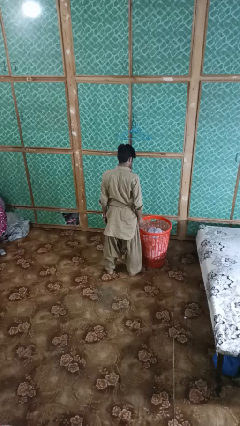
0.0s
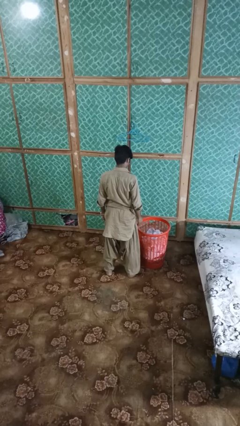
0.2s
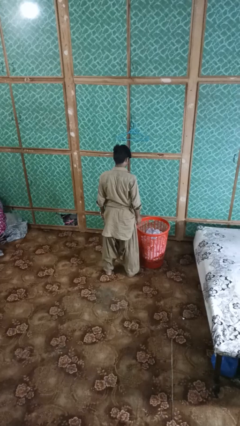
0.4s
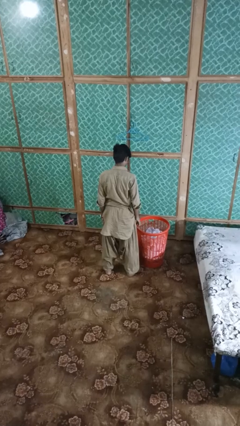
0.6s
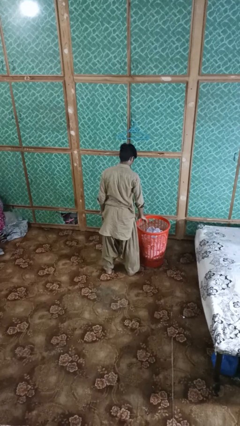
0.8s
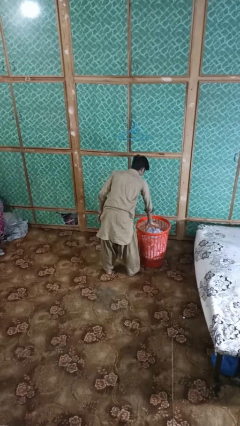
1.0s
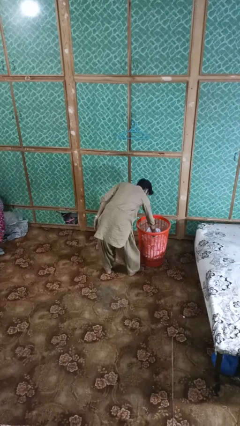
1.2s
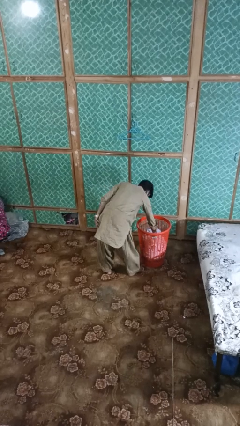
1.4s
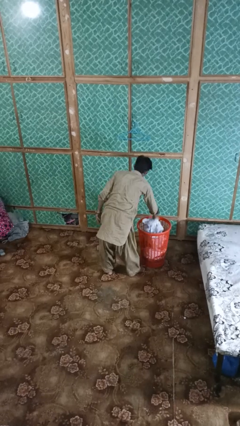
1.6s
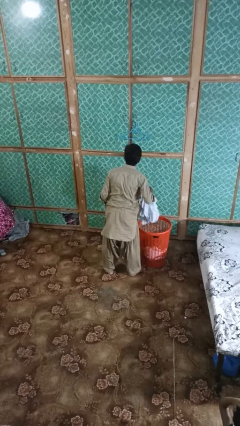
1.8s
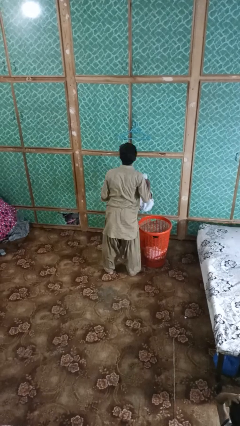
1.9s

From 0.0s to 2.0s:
person takes object from basket

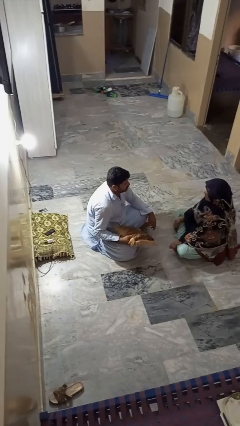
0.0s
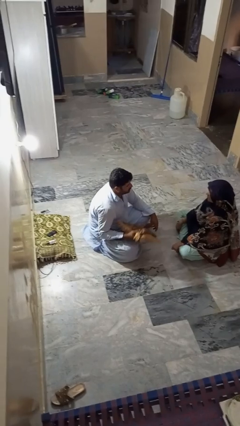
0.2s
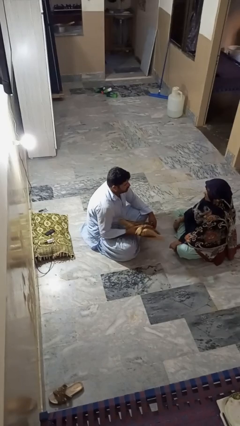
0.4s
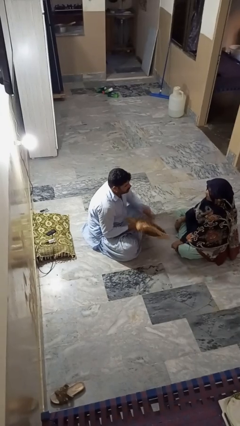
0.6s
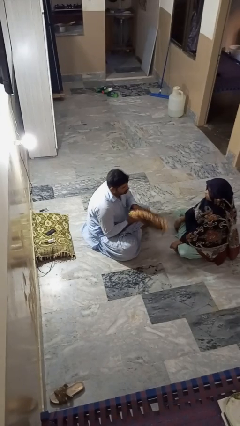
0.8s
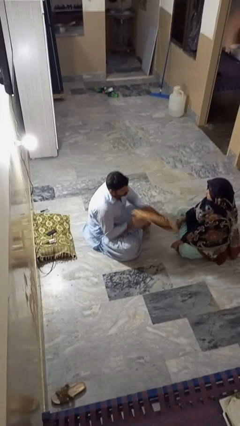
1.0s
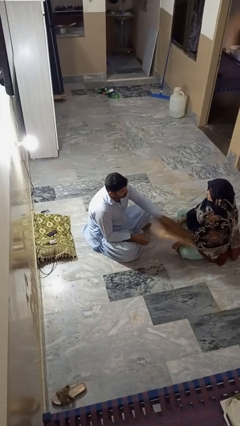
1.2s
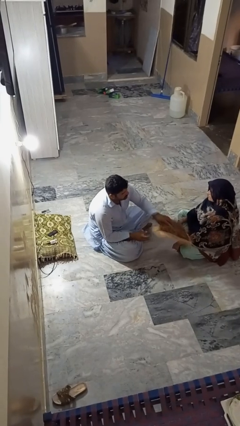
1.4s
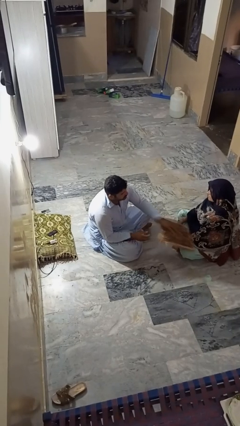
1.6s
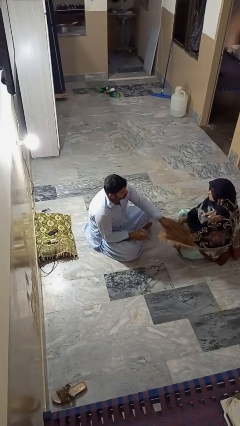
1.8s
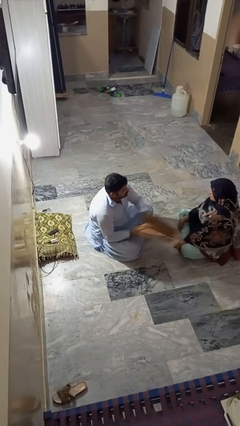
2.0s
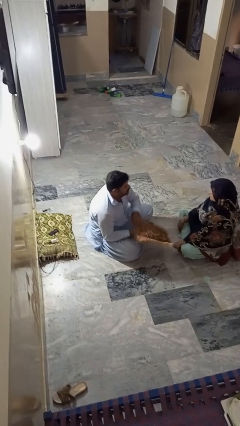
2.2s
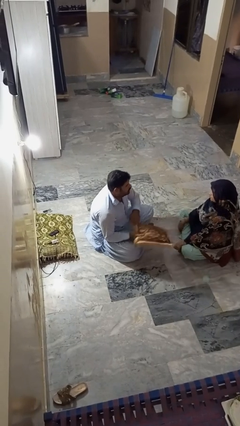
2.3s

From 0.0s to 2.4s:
person hits person with pillow

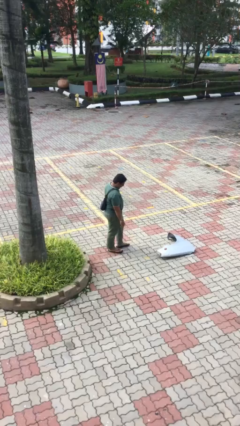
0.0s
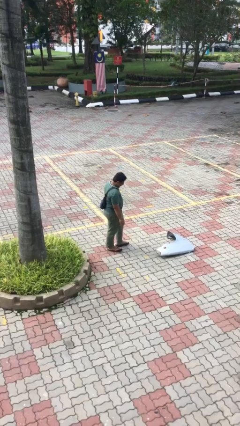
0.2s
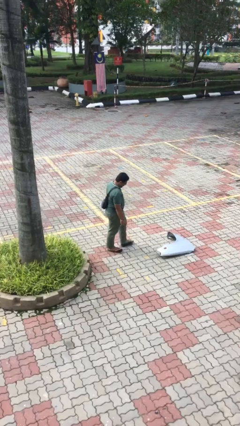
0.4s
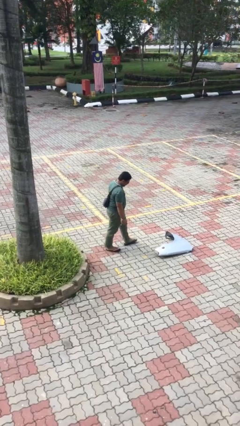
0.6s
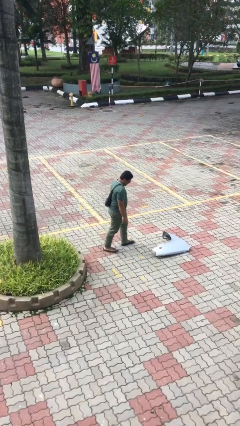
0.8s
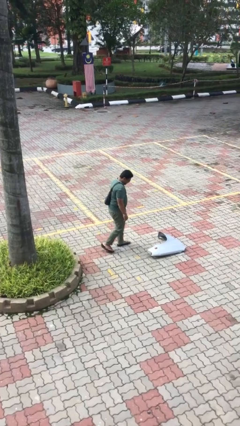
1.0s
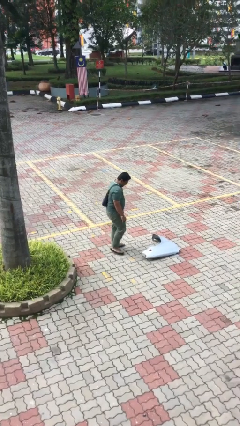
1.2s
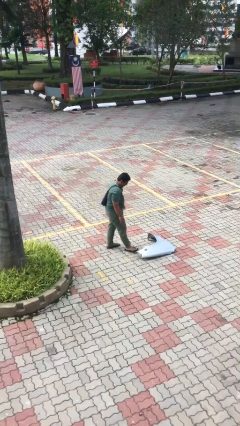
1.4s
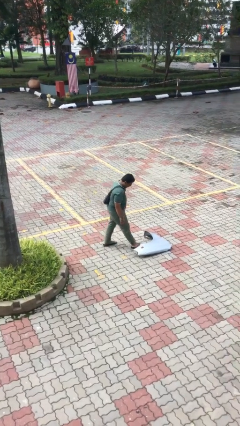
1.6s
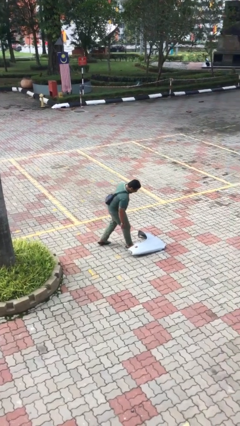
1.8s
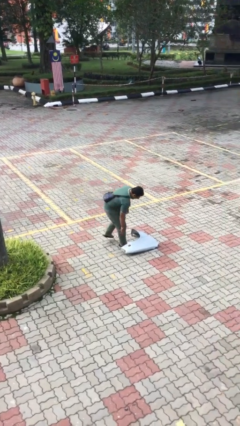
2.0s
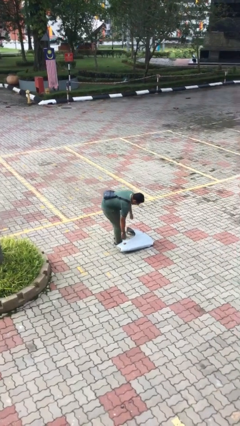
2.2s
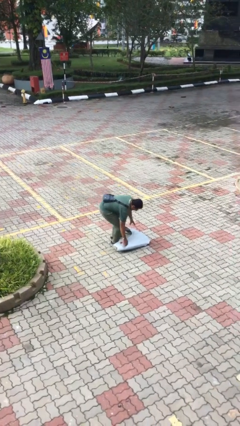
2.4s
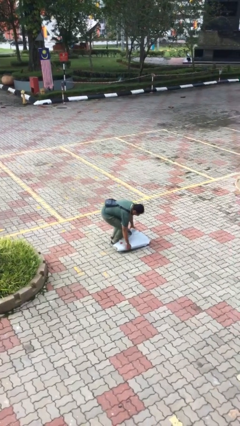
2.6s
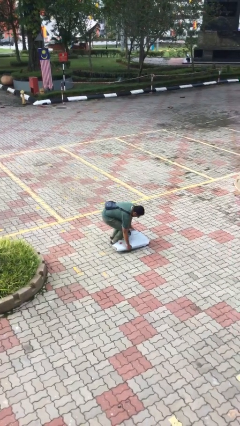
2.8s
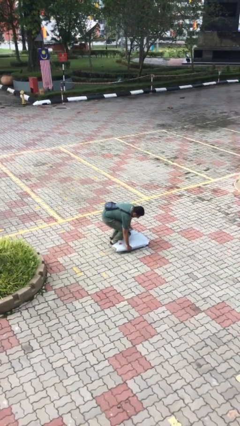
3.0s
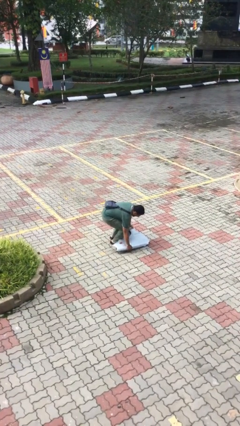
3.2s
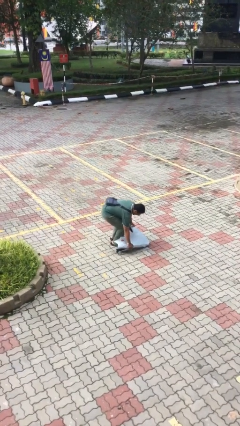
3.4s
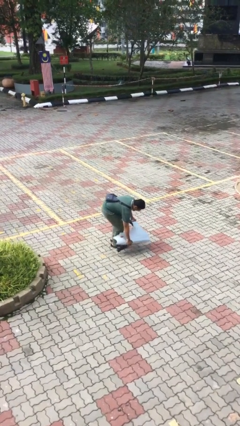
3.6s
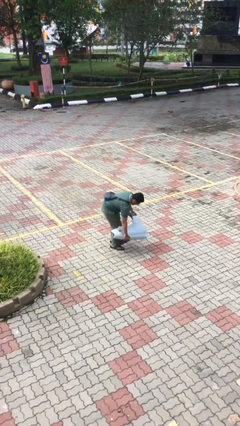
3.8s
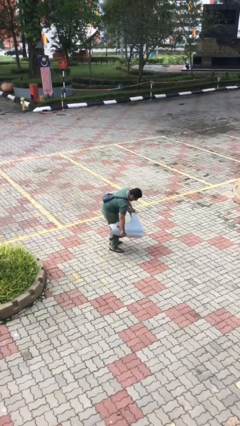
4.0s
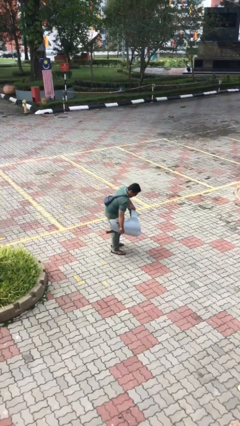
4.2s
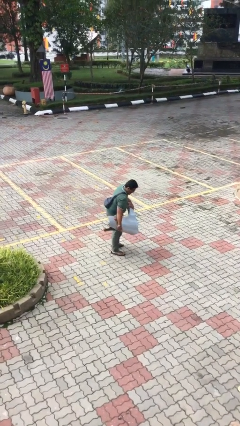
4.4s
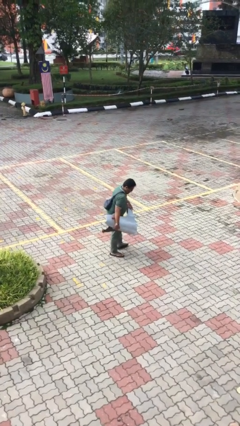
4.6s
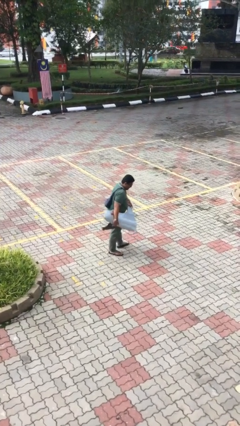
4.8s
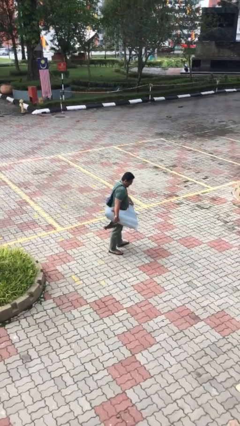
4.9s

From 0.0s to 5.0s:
person picks up object from floor

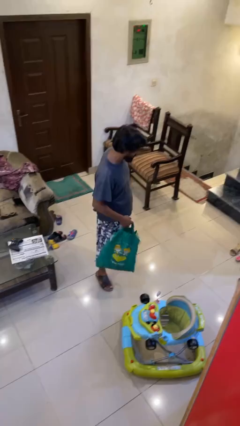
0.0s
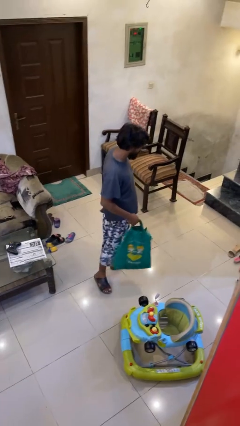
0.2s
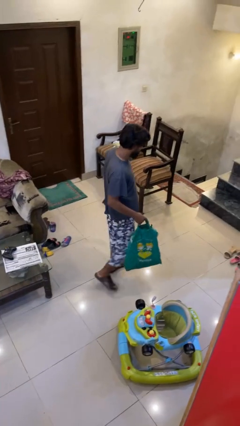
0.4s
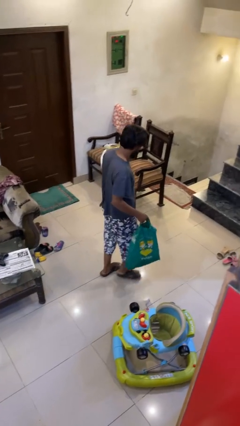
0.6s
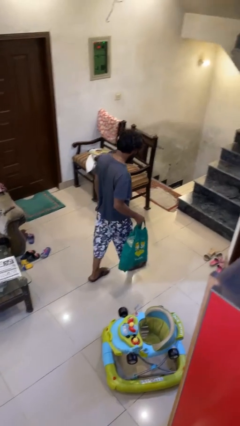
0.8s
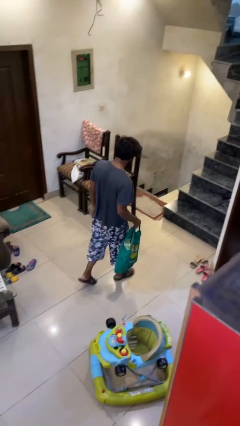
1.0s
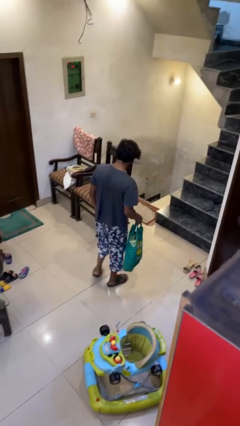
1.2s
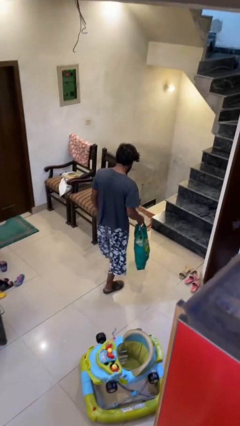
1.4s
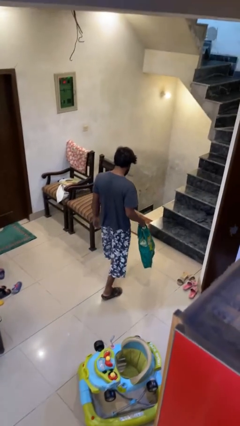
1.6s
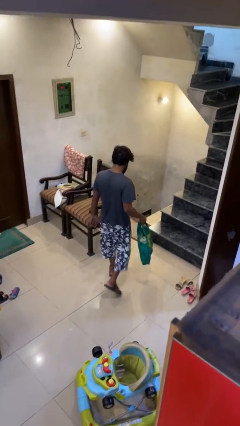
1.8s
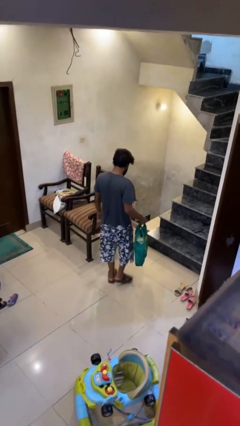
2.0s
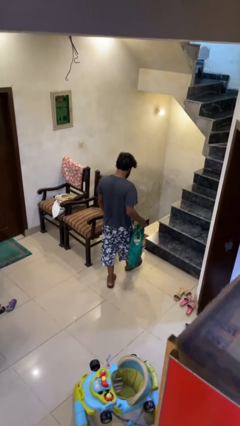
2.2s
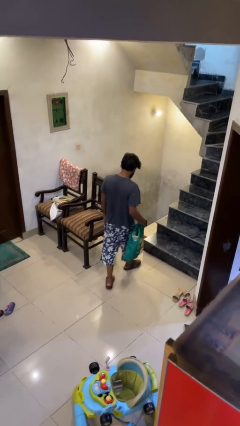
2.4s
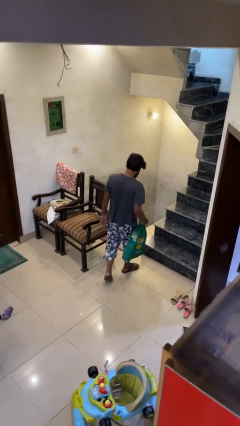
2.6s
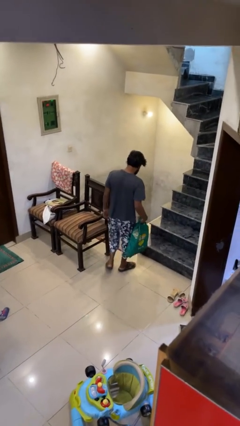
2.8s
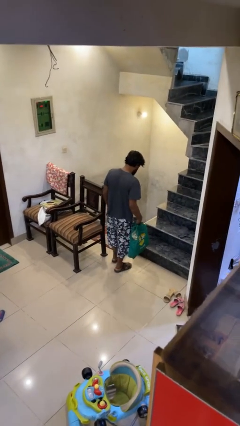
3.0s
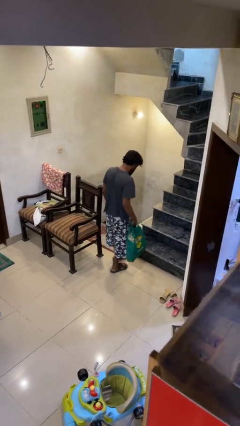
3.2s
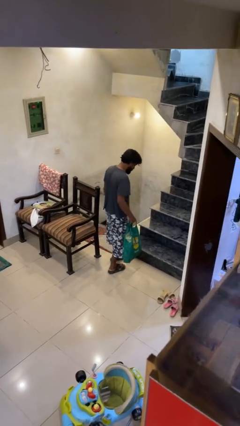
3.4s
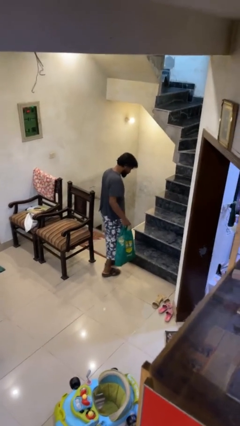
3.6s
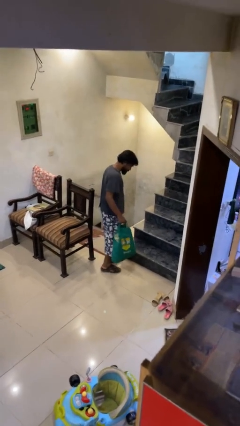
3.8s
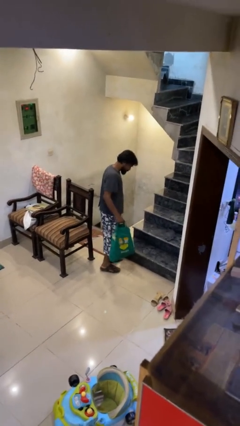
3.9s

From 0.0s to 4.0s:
person carries groceries

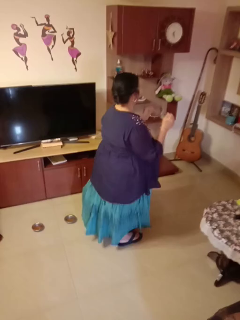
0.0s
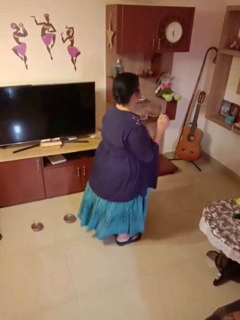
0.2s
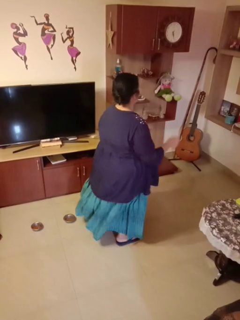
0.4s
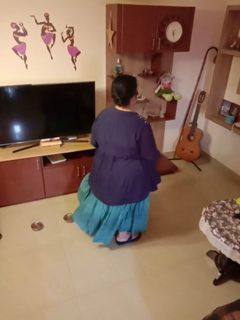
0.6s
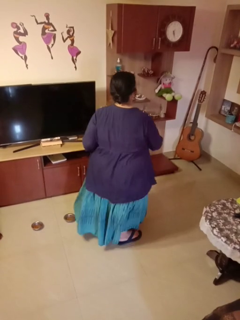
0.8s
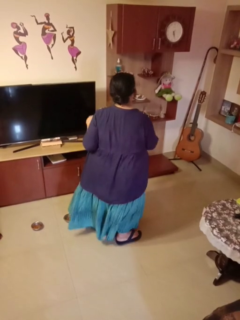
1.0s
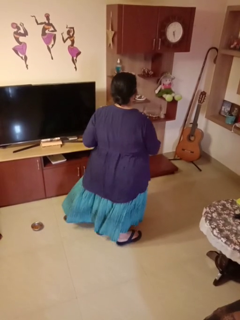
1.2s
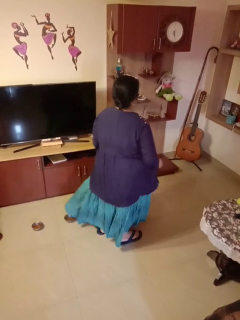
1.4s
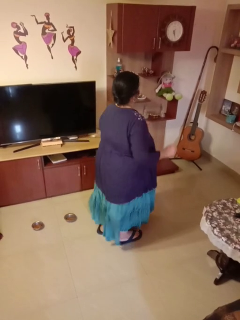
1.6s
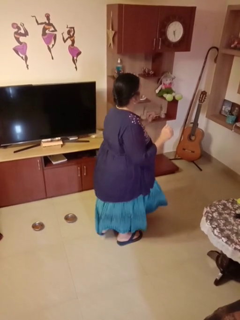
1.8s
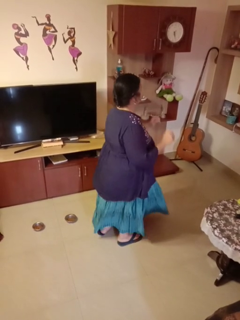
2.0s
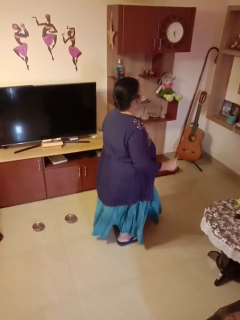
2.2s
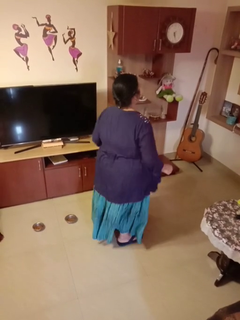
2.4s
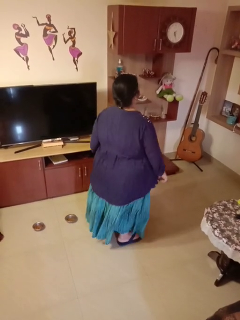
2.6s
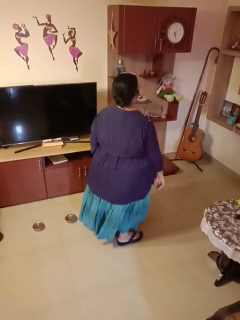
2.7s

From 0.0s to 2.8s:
person dances in place

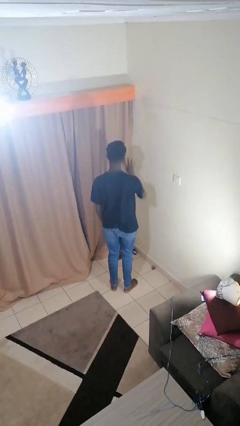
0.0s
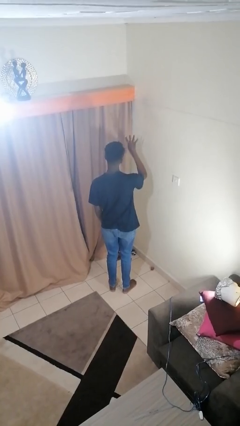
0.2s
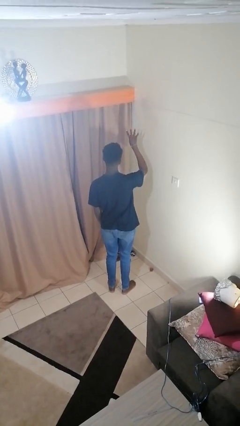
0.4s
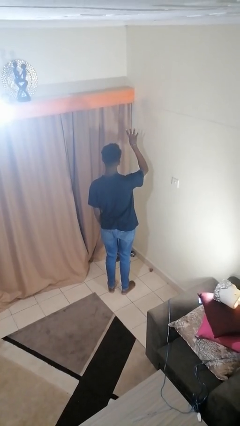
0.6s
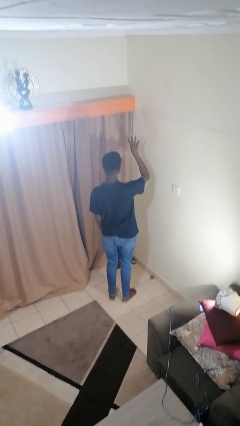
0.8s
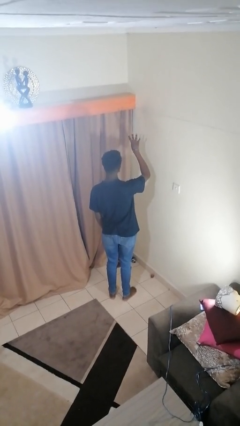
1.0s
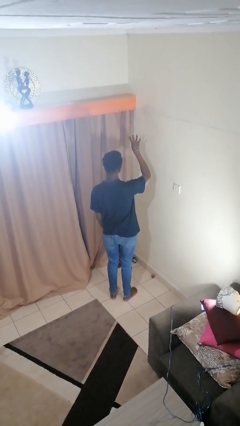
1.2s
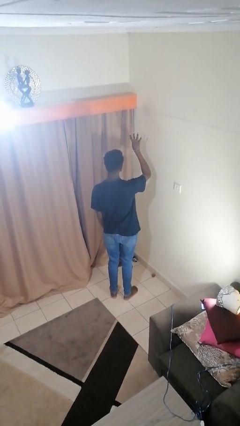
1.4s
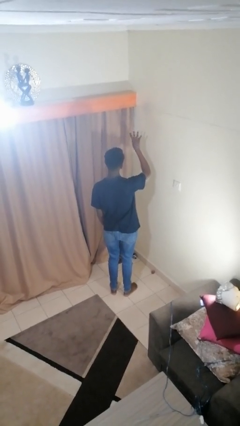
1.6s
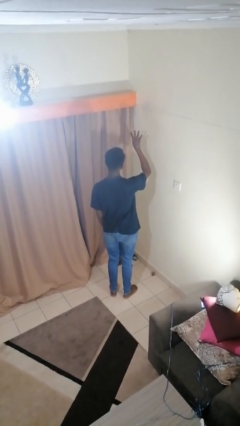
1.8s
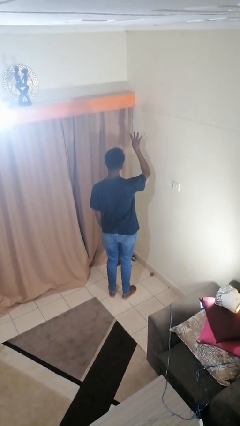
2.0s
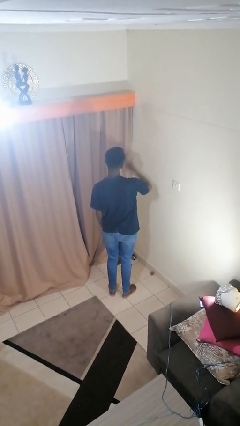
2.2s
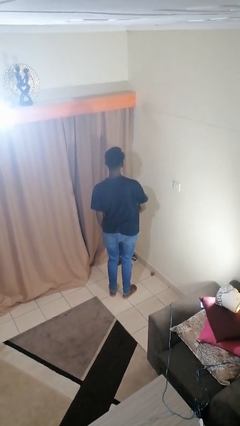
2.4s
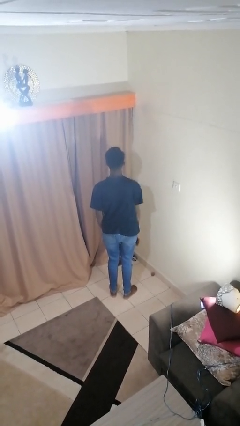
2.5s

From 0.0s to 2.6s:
person gestures number four
